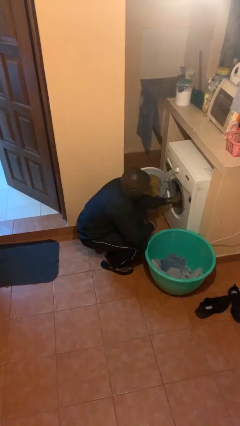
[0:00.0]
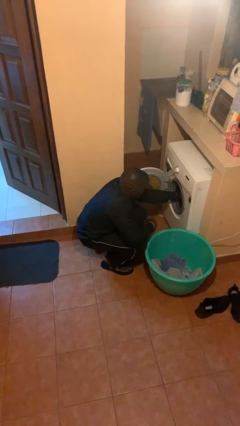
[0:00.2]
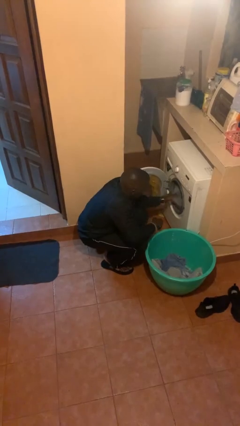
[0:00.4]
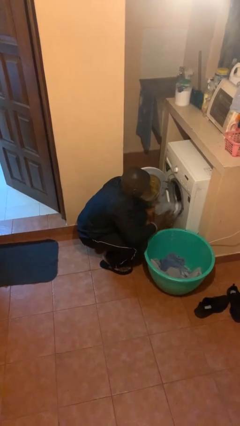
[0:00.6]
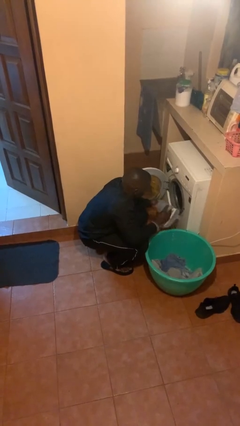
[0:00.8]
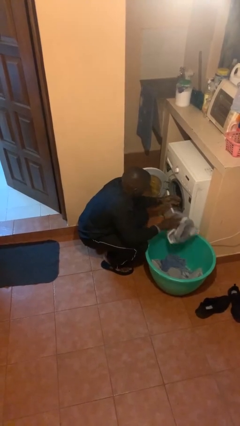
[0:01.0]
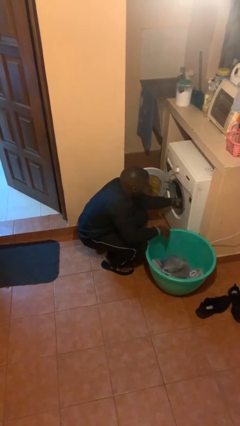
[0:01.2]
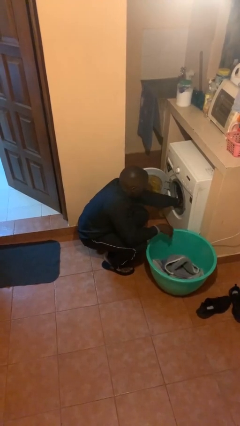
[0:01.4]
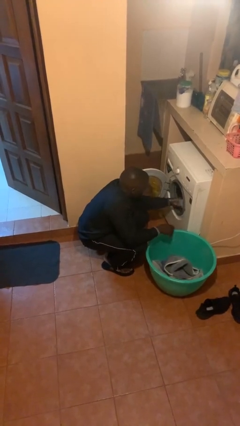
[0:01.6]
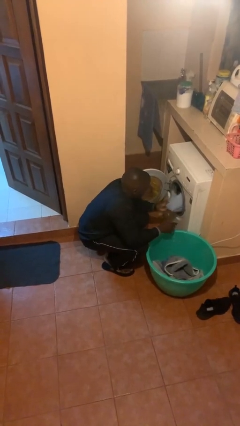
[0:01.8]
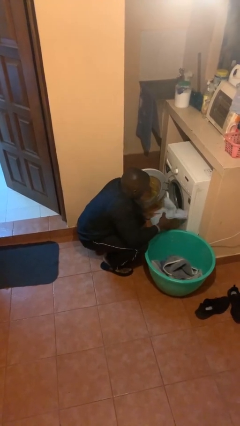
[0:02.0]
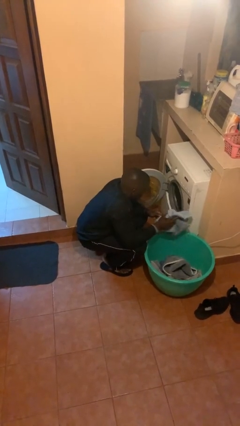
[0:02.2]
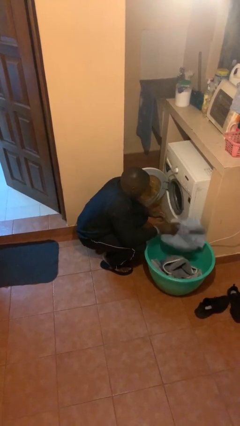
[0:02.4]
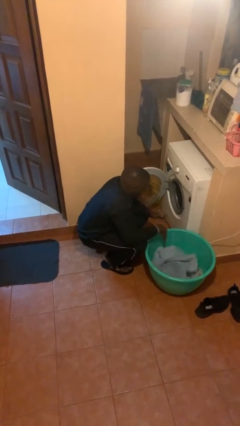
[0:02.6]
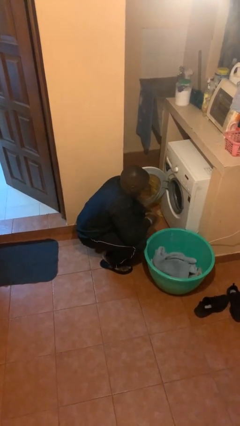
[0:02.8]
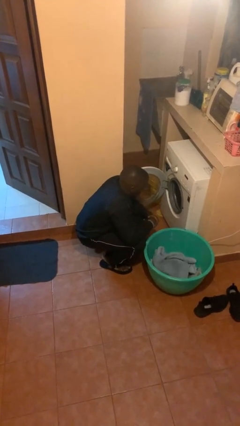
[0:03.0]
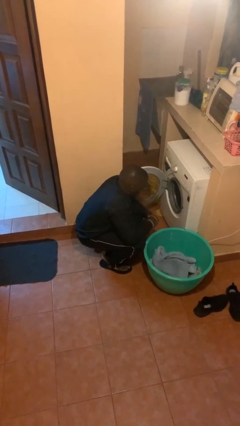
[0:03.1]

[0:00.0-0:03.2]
person loads clotheswasher

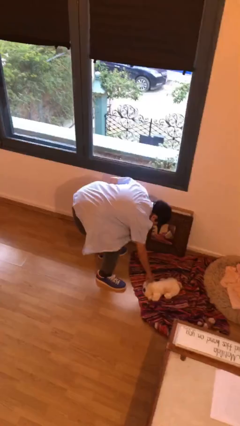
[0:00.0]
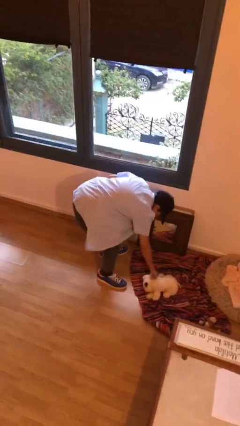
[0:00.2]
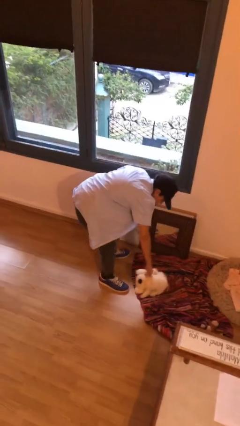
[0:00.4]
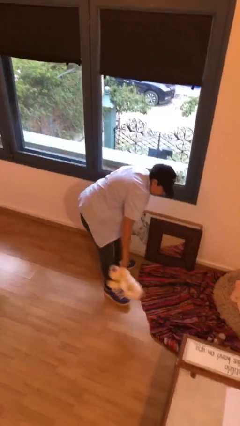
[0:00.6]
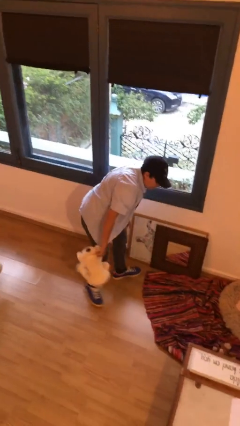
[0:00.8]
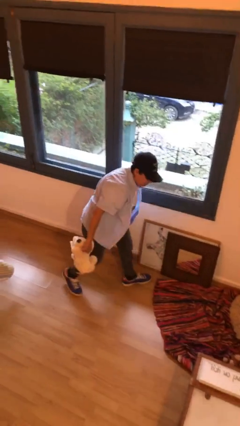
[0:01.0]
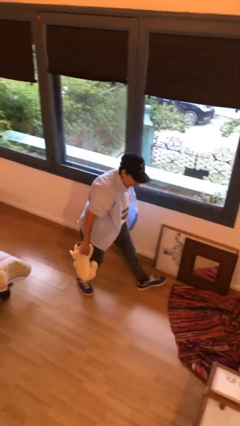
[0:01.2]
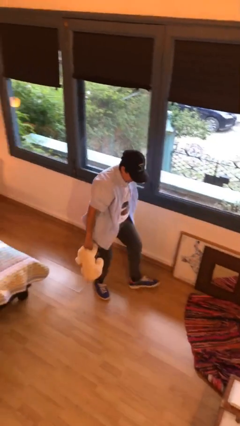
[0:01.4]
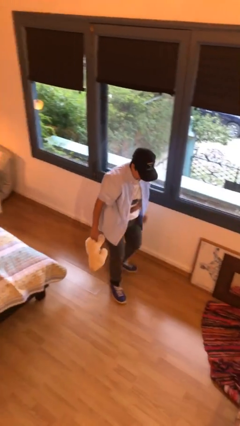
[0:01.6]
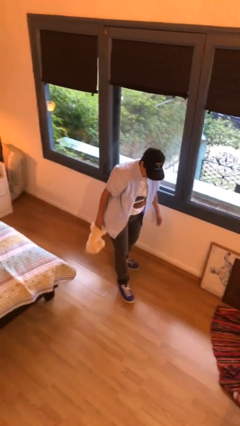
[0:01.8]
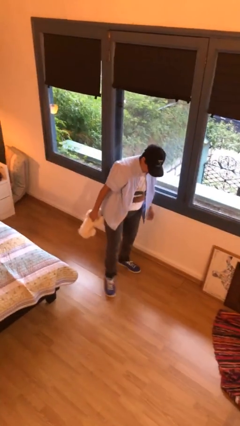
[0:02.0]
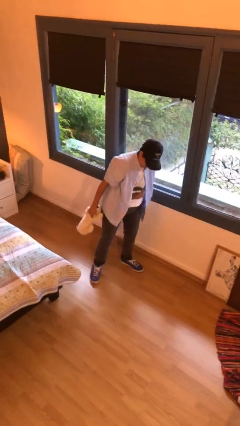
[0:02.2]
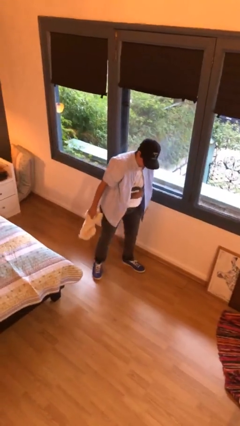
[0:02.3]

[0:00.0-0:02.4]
person picks up object from floor

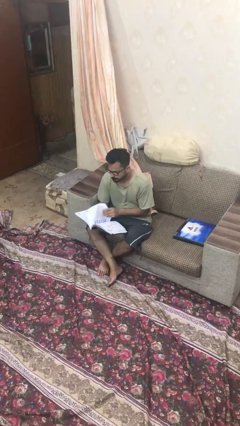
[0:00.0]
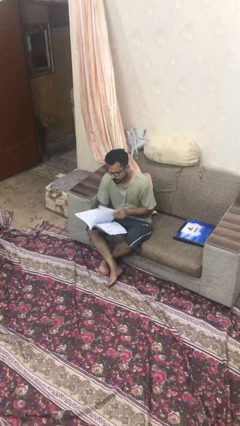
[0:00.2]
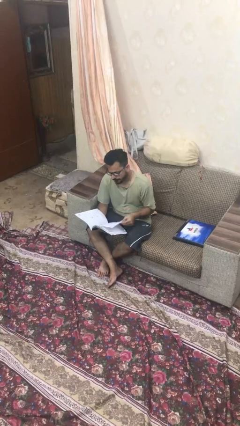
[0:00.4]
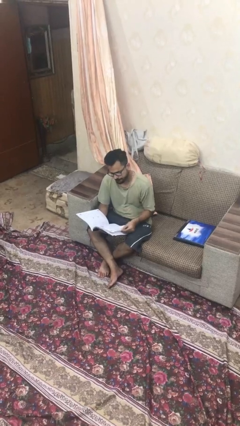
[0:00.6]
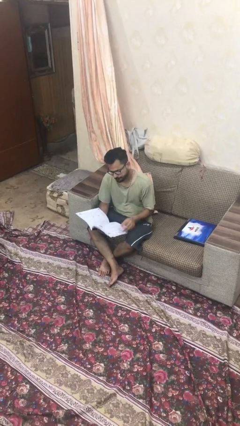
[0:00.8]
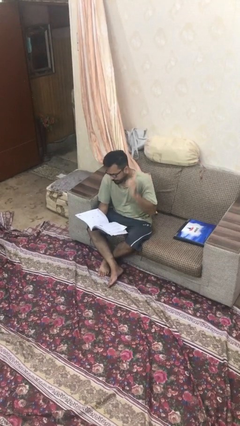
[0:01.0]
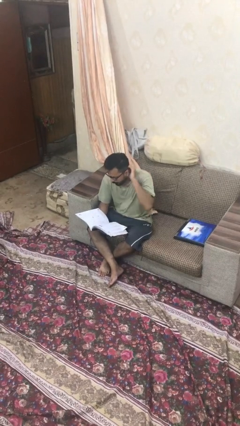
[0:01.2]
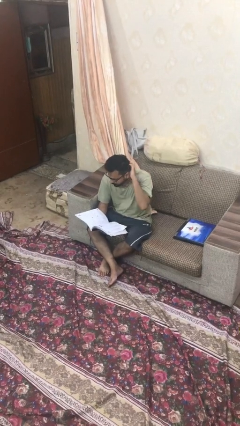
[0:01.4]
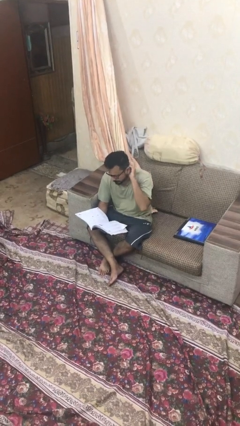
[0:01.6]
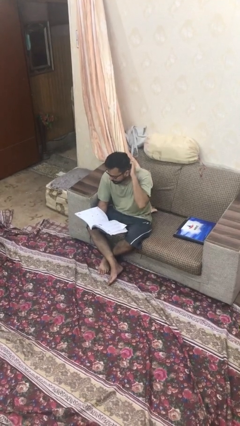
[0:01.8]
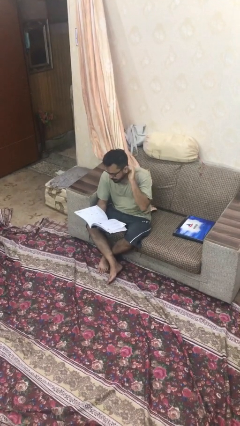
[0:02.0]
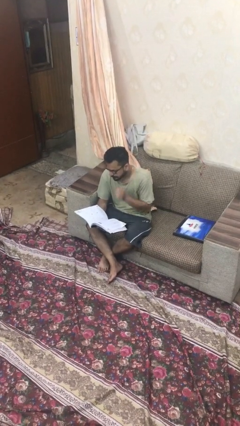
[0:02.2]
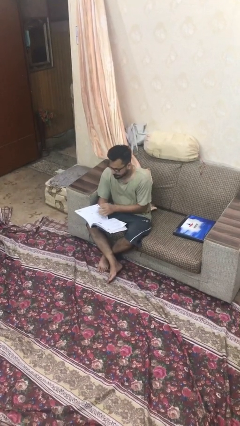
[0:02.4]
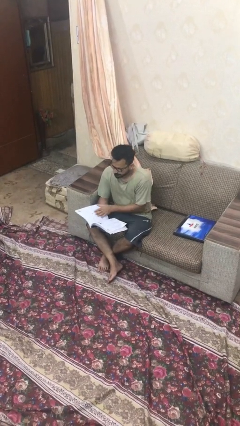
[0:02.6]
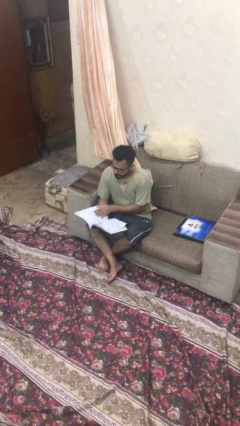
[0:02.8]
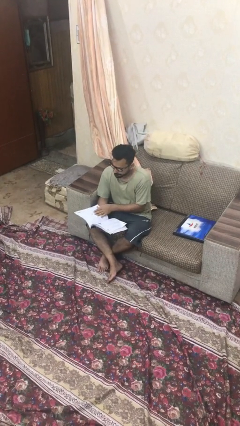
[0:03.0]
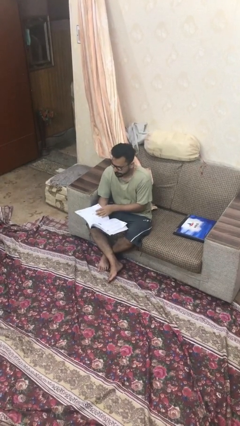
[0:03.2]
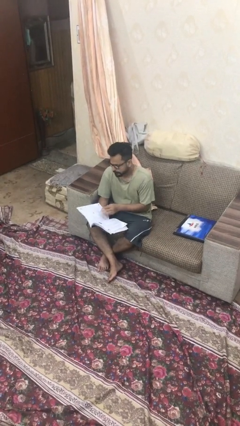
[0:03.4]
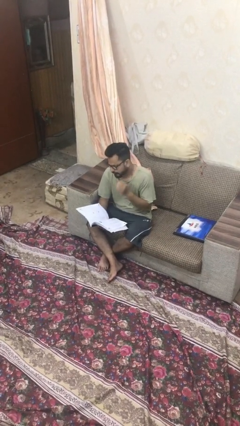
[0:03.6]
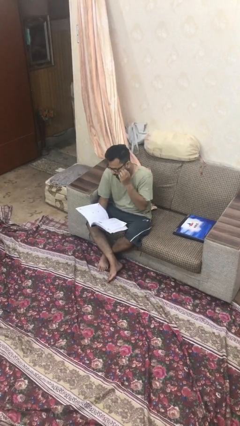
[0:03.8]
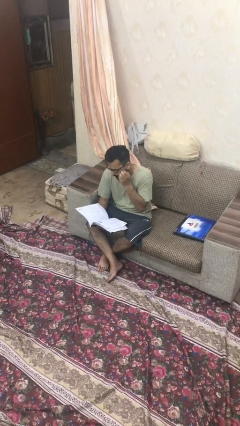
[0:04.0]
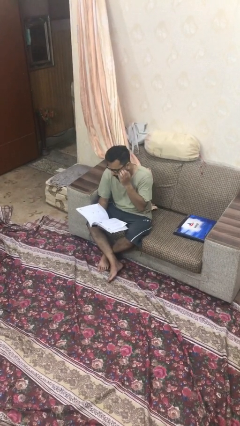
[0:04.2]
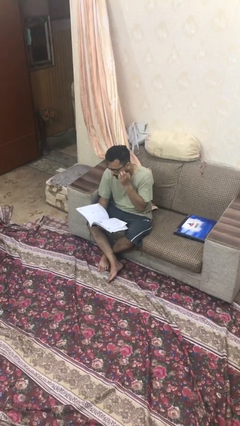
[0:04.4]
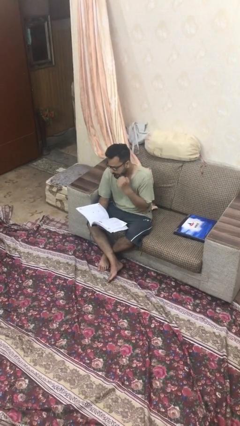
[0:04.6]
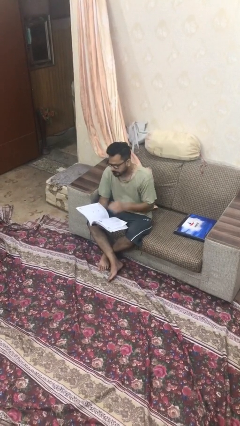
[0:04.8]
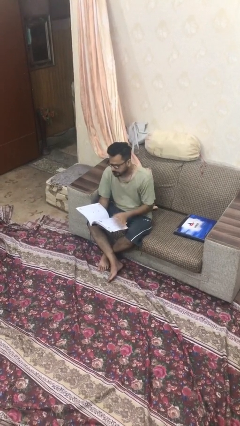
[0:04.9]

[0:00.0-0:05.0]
person reads document

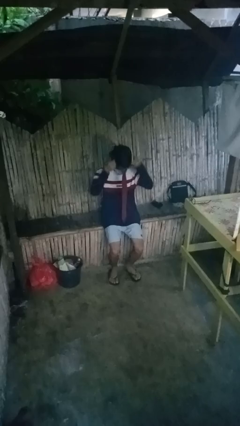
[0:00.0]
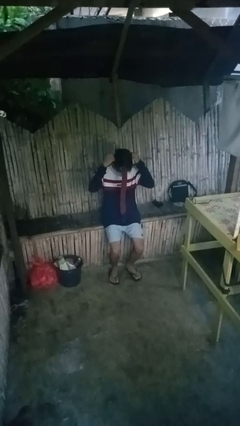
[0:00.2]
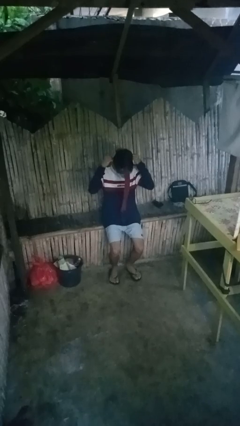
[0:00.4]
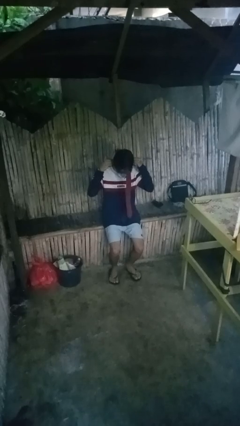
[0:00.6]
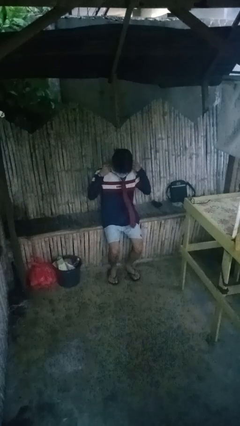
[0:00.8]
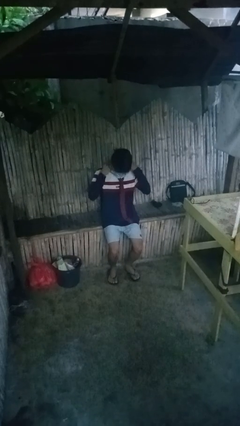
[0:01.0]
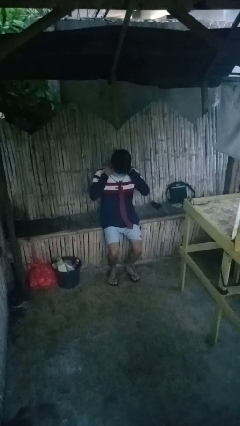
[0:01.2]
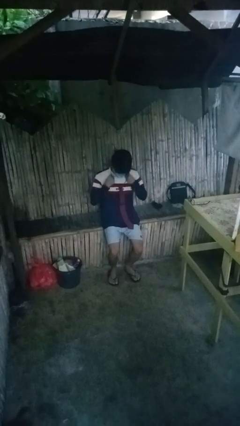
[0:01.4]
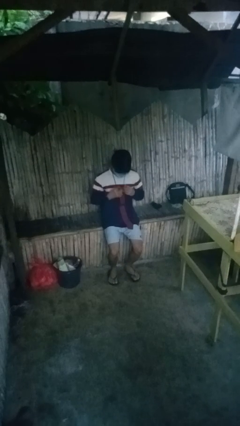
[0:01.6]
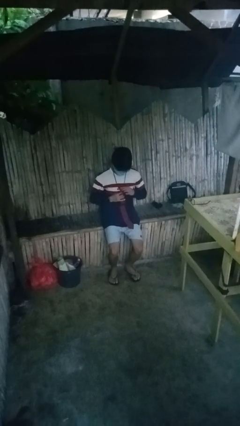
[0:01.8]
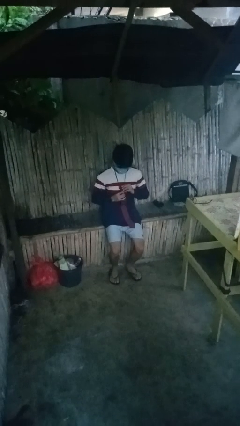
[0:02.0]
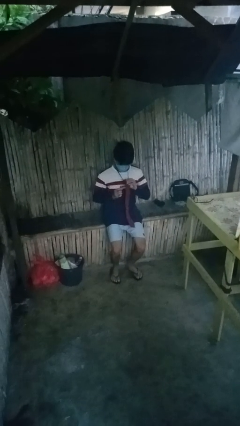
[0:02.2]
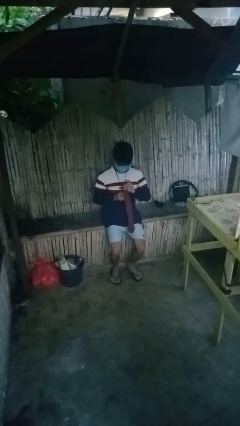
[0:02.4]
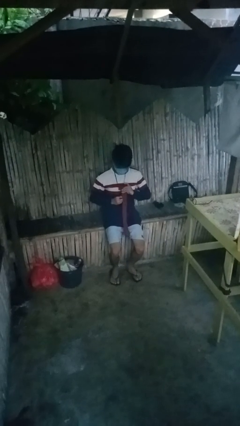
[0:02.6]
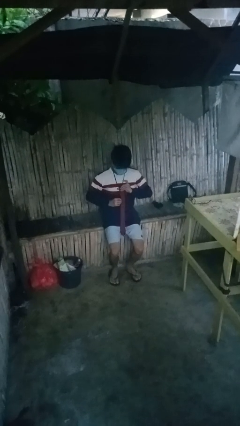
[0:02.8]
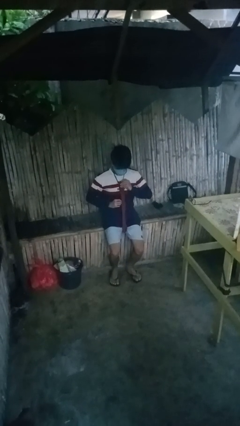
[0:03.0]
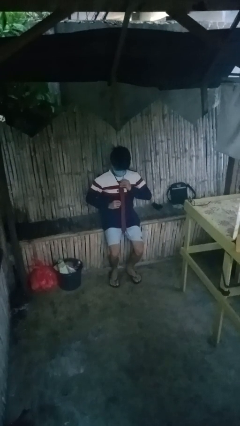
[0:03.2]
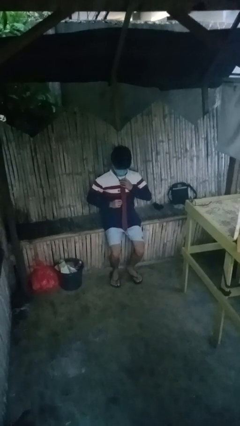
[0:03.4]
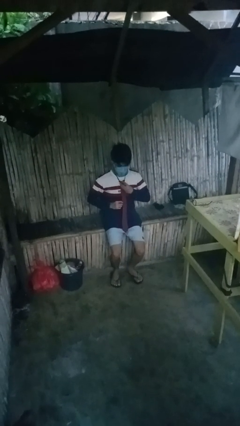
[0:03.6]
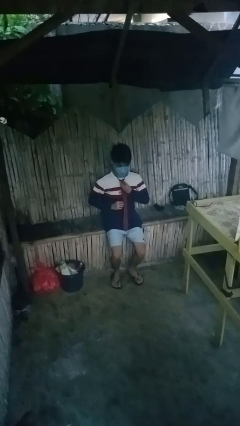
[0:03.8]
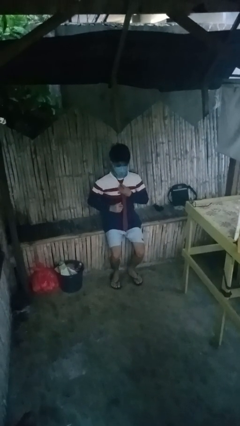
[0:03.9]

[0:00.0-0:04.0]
person puts on necktie

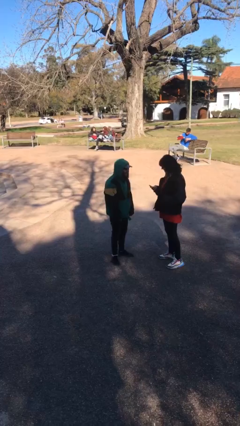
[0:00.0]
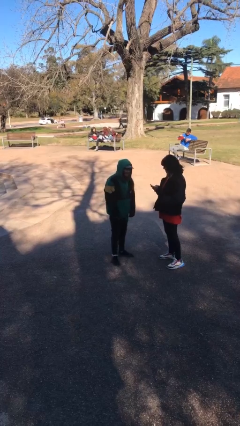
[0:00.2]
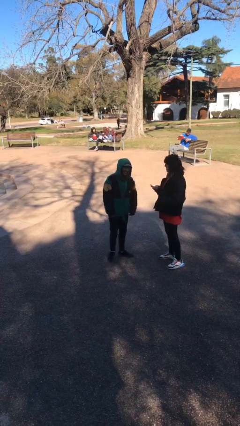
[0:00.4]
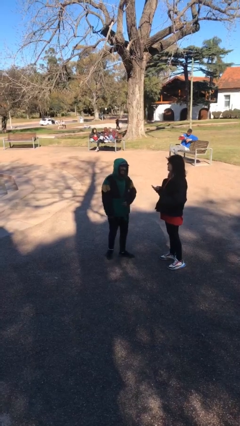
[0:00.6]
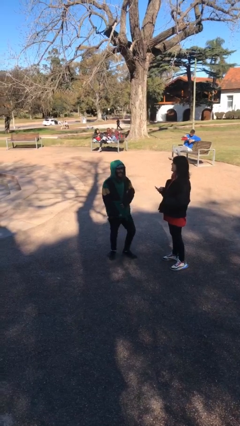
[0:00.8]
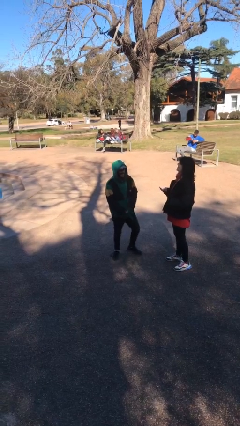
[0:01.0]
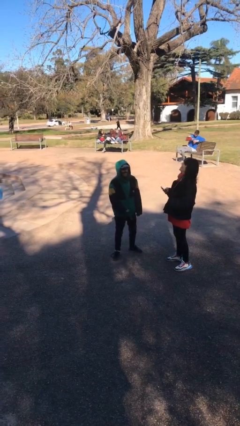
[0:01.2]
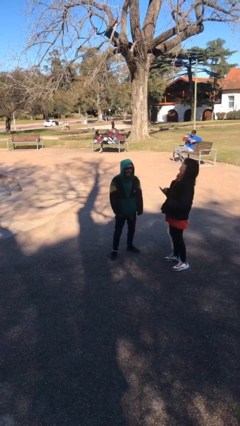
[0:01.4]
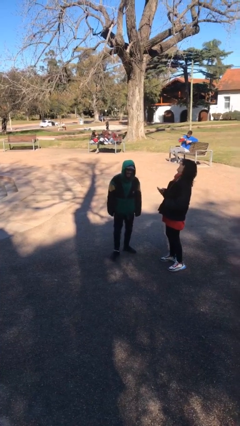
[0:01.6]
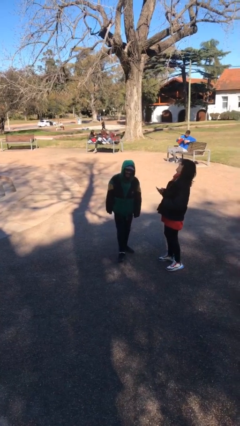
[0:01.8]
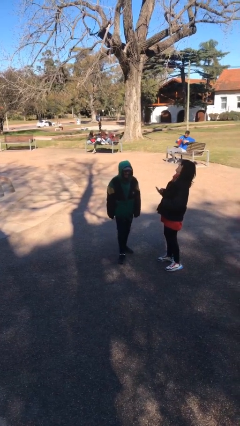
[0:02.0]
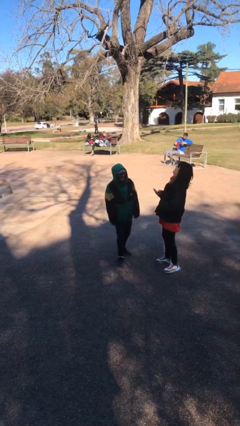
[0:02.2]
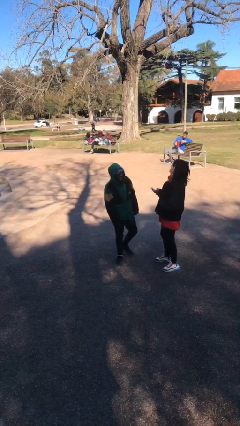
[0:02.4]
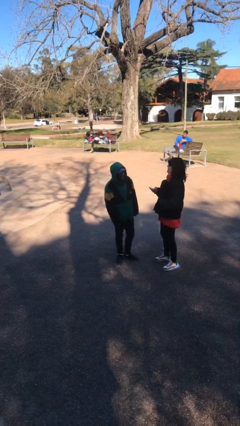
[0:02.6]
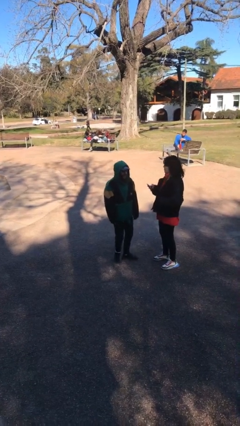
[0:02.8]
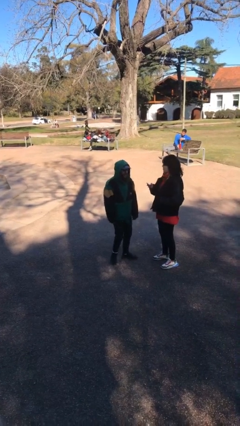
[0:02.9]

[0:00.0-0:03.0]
person laughs with person
